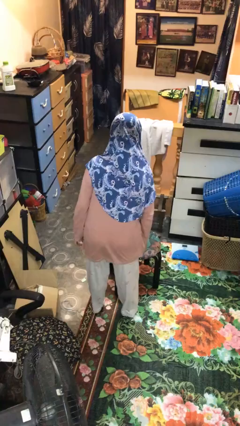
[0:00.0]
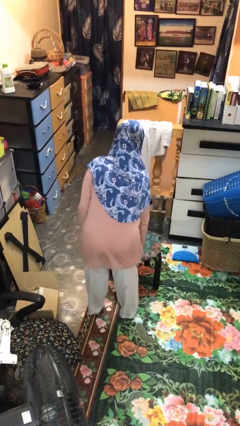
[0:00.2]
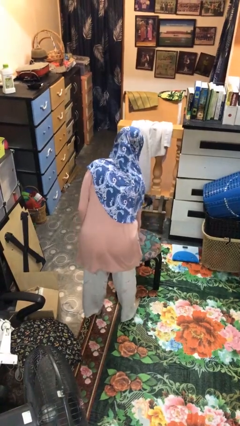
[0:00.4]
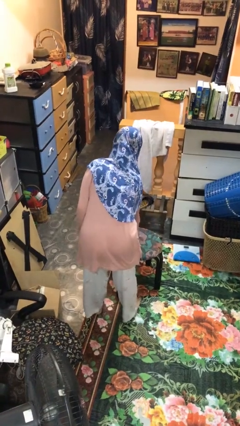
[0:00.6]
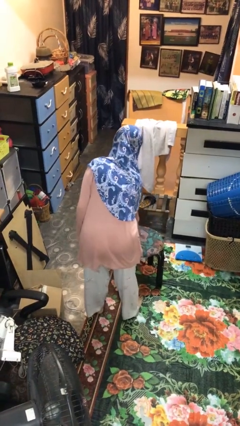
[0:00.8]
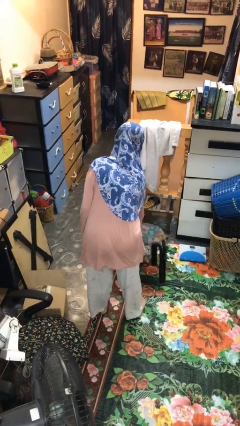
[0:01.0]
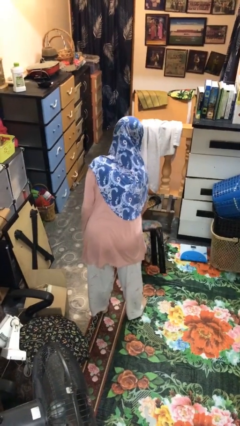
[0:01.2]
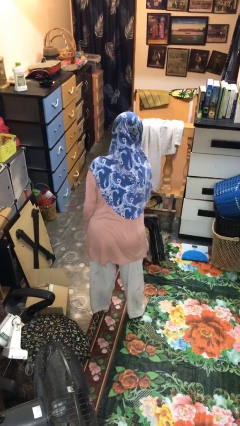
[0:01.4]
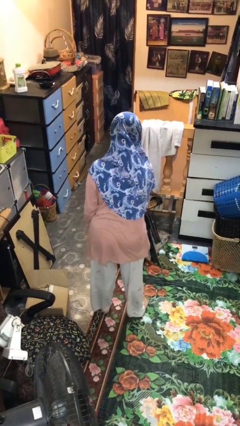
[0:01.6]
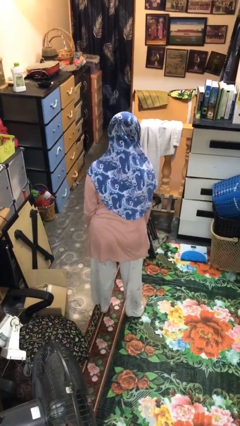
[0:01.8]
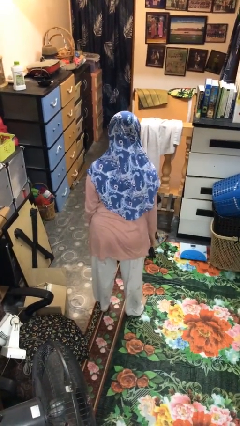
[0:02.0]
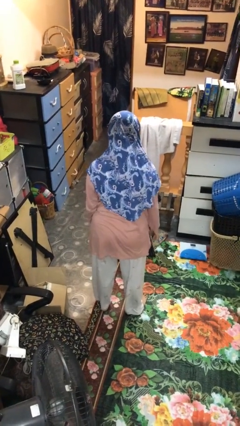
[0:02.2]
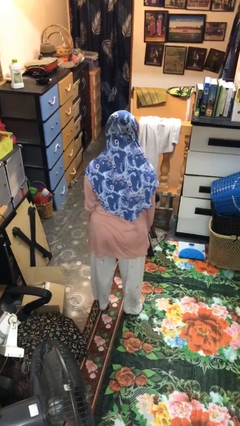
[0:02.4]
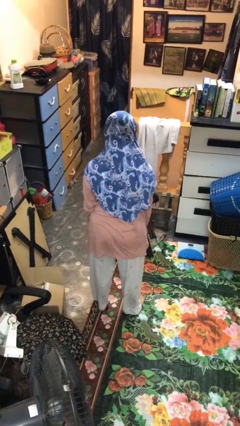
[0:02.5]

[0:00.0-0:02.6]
person knocks over furniture

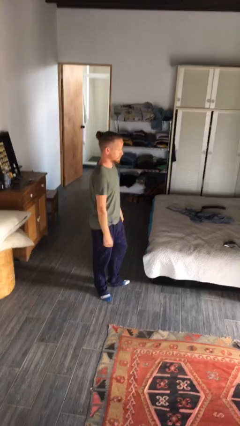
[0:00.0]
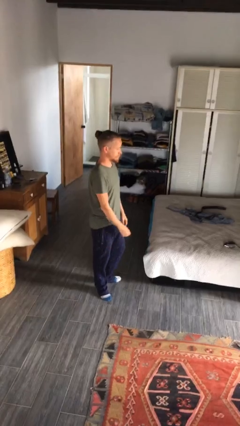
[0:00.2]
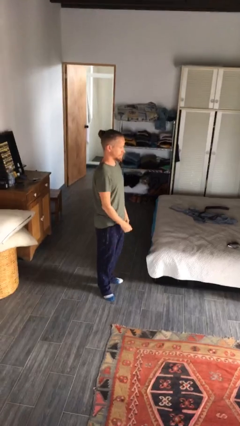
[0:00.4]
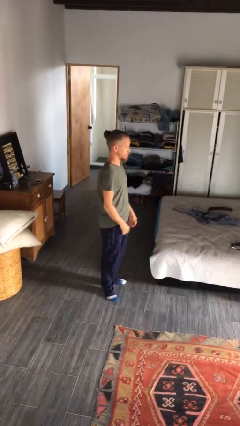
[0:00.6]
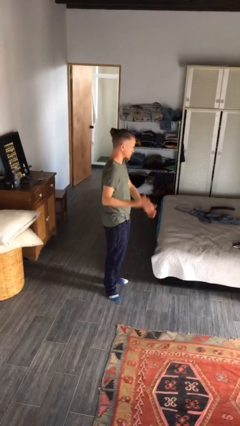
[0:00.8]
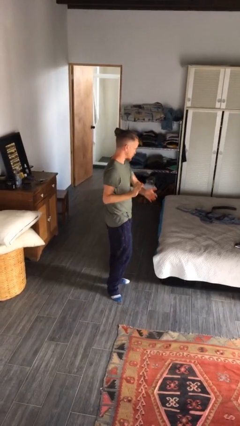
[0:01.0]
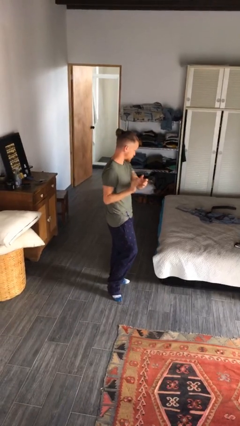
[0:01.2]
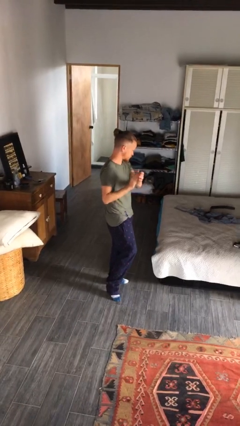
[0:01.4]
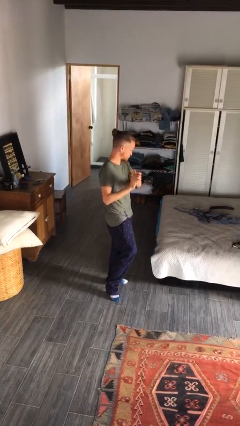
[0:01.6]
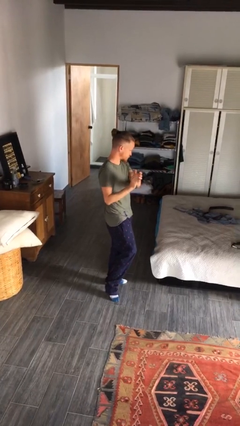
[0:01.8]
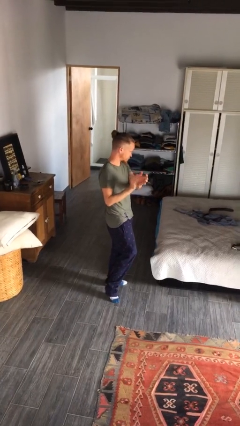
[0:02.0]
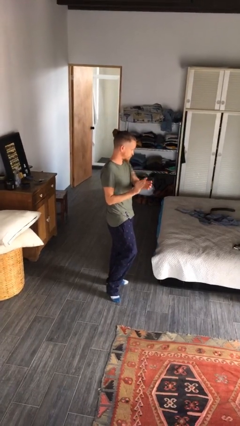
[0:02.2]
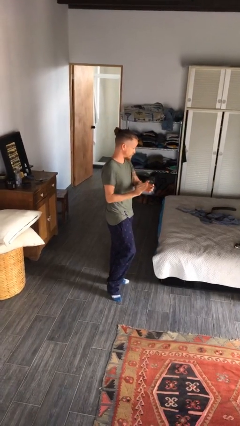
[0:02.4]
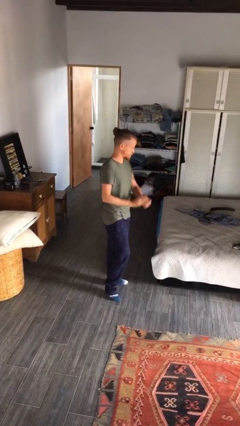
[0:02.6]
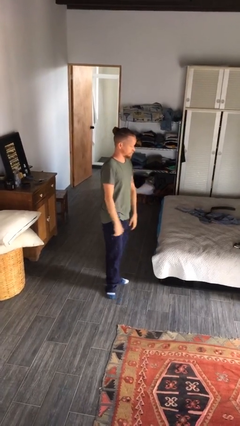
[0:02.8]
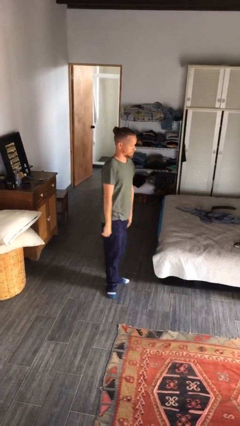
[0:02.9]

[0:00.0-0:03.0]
person claps hands

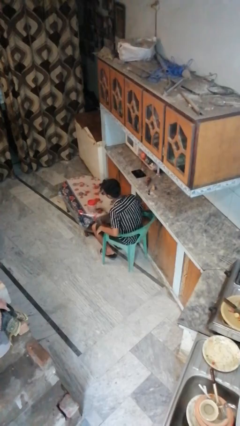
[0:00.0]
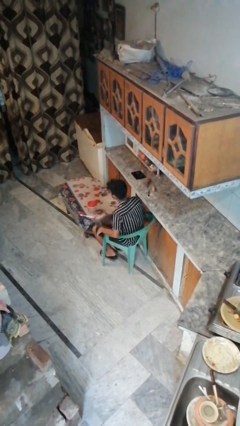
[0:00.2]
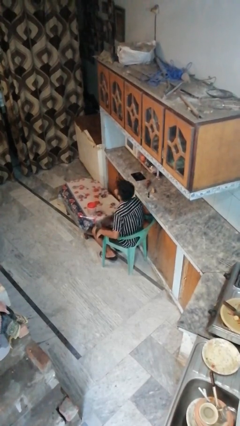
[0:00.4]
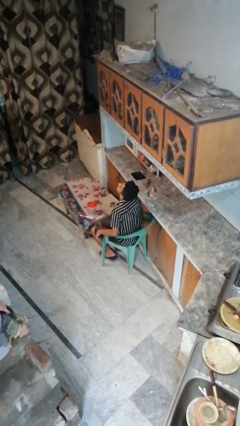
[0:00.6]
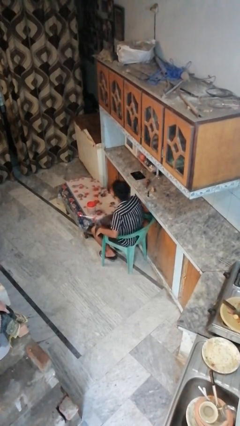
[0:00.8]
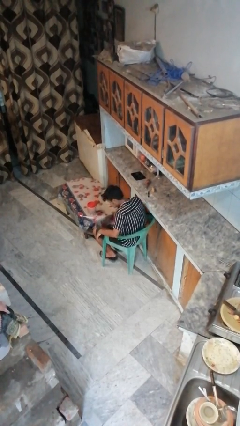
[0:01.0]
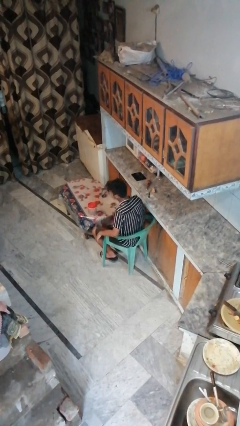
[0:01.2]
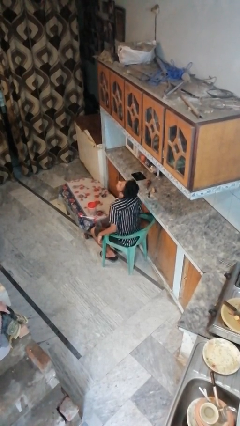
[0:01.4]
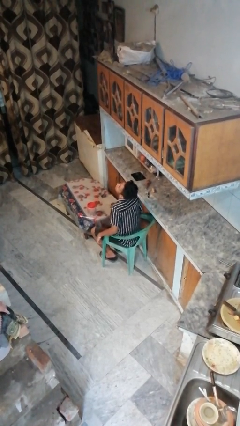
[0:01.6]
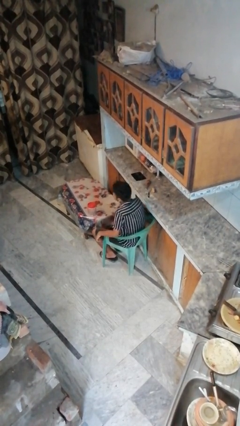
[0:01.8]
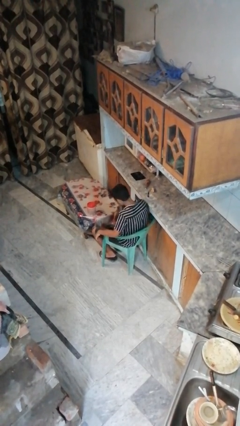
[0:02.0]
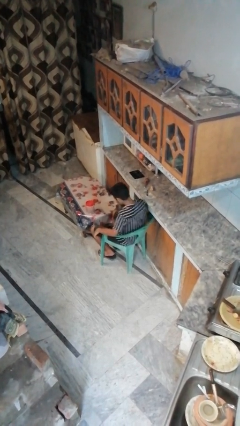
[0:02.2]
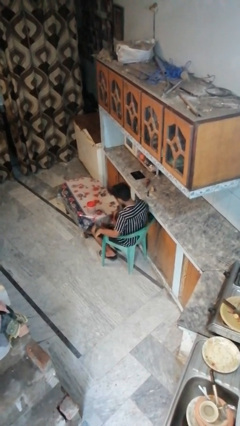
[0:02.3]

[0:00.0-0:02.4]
person nods head

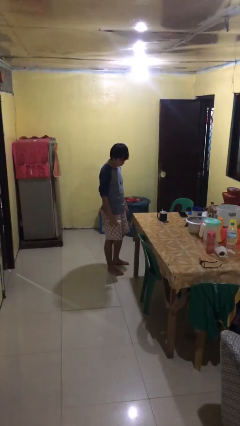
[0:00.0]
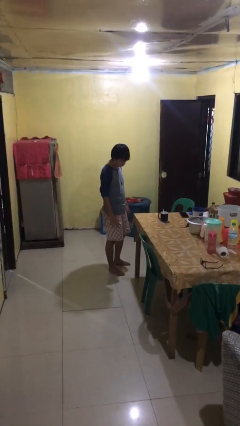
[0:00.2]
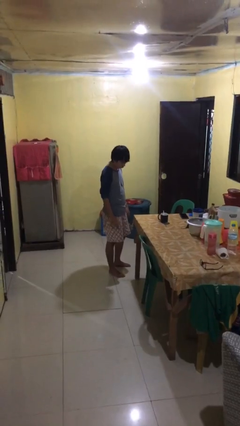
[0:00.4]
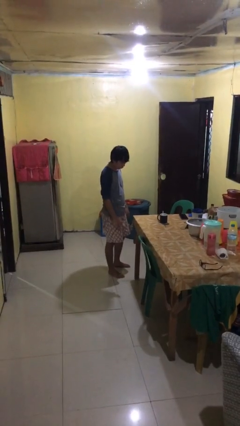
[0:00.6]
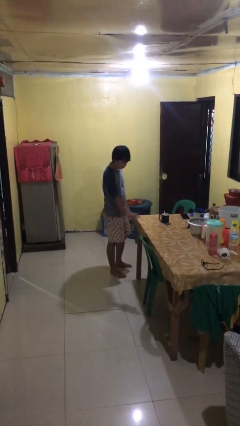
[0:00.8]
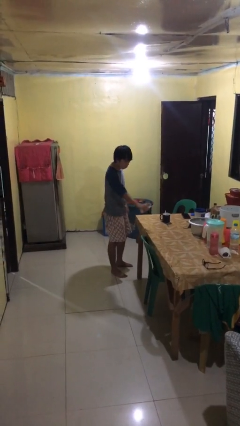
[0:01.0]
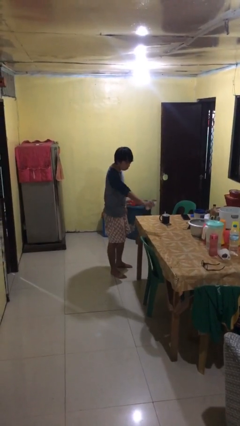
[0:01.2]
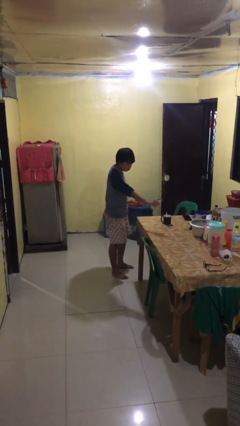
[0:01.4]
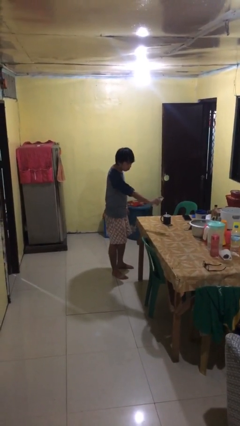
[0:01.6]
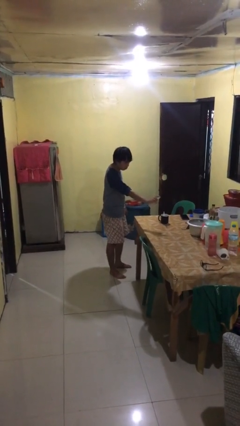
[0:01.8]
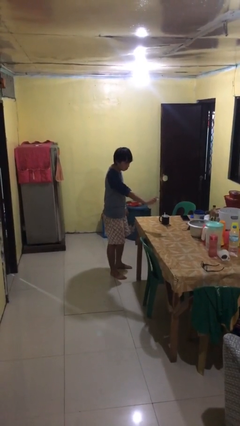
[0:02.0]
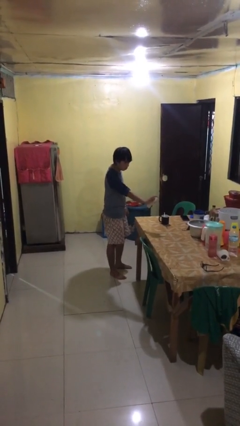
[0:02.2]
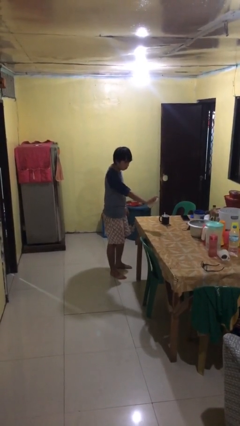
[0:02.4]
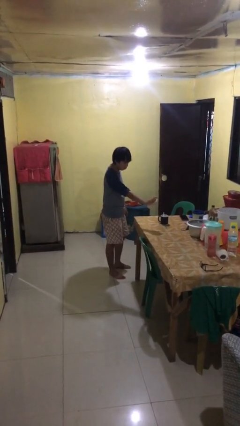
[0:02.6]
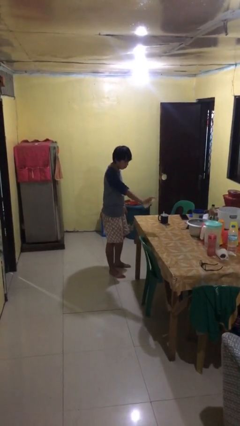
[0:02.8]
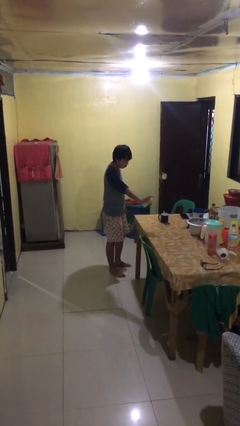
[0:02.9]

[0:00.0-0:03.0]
person sprays from bottle

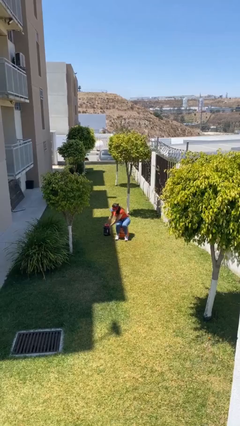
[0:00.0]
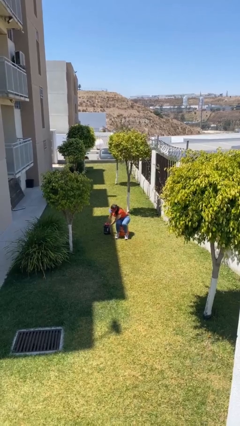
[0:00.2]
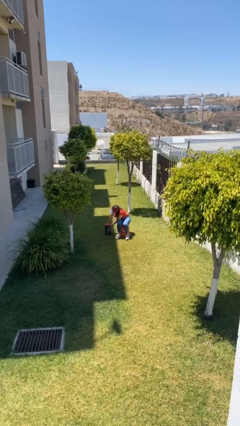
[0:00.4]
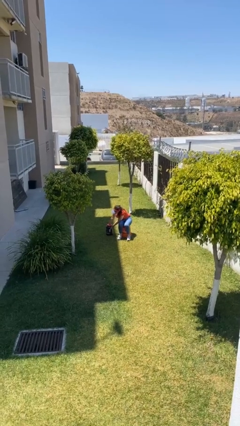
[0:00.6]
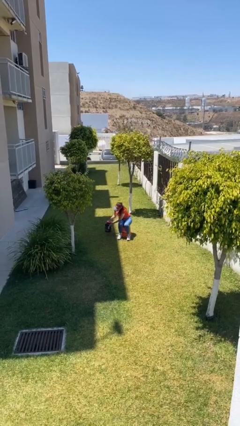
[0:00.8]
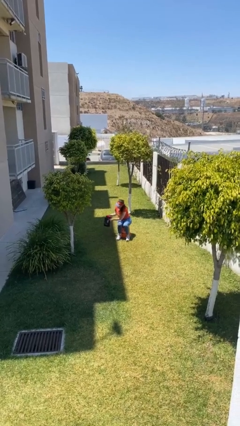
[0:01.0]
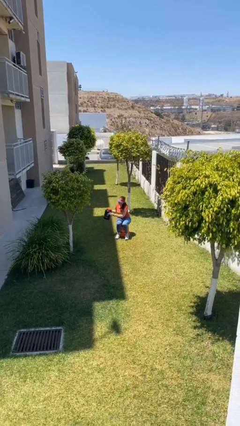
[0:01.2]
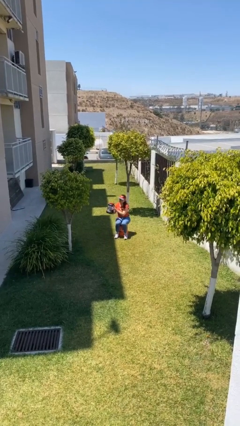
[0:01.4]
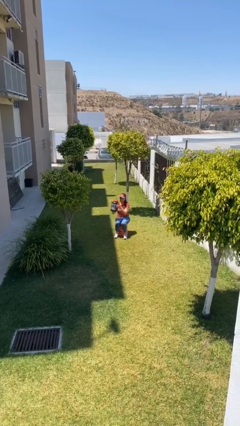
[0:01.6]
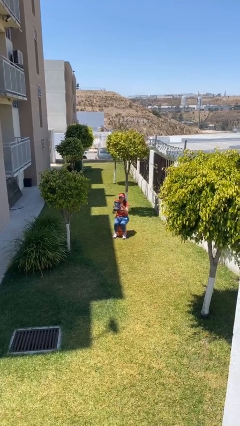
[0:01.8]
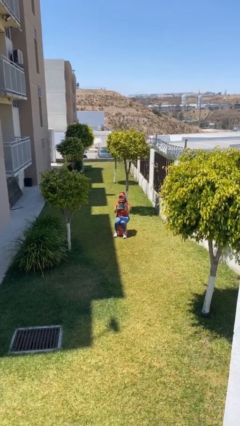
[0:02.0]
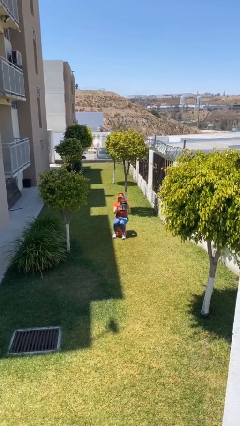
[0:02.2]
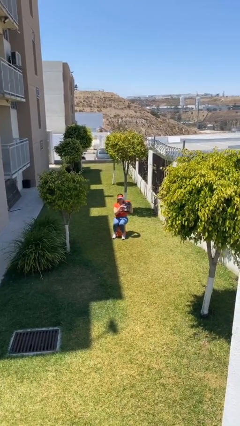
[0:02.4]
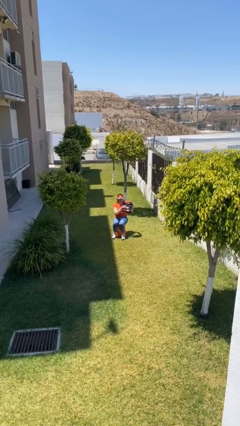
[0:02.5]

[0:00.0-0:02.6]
person picks up object from floor

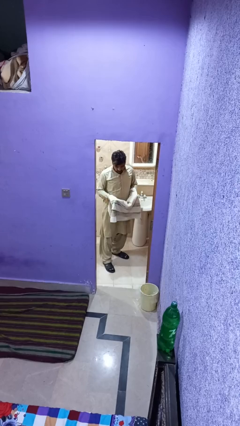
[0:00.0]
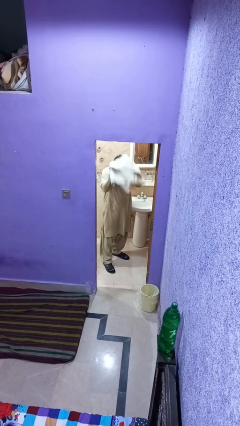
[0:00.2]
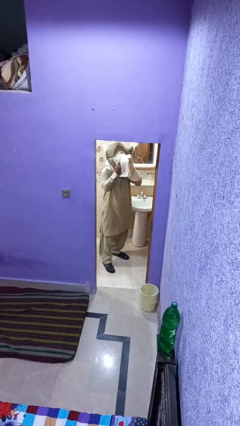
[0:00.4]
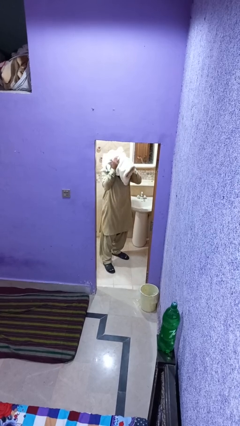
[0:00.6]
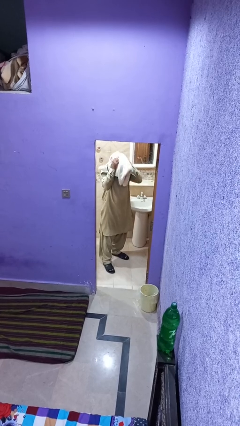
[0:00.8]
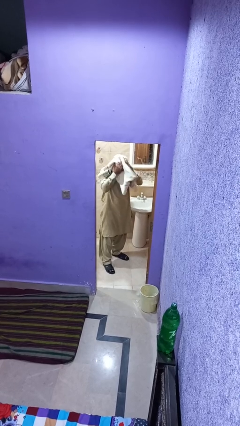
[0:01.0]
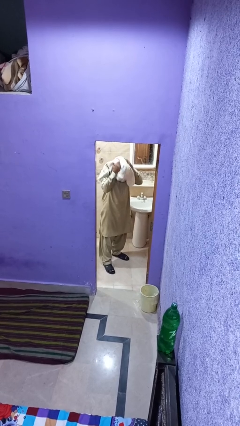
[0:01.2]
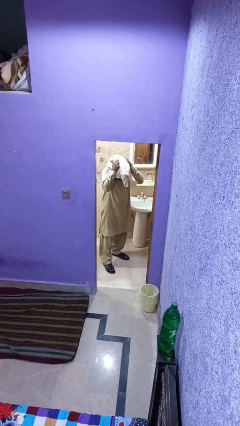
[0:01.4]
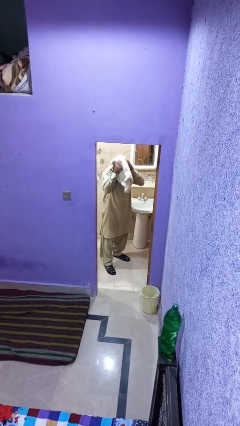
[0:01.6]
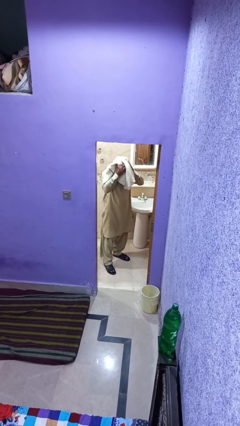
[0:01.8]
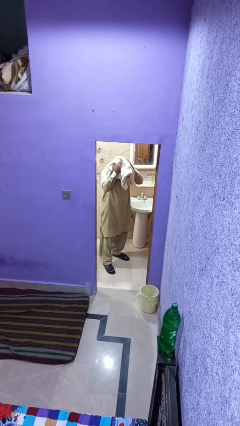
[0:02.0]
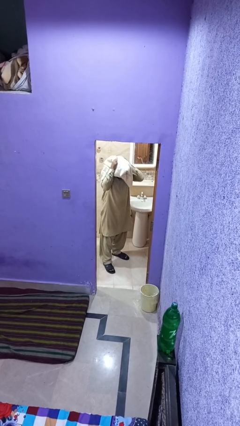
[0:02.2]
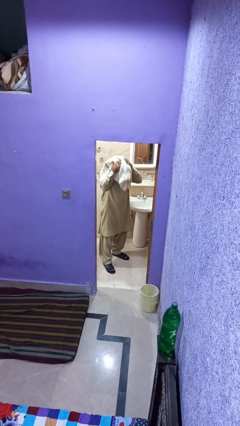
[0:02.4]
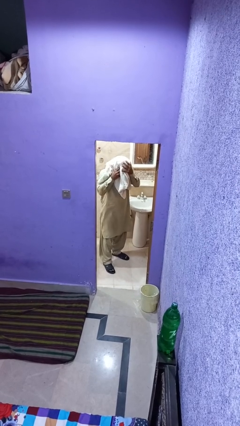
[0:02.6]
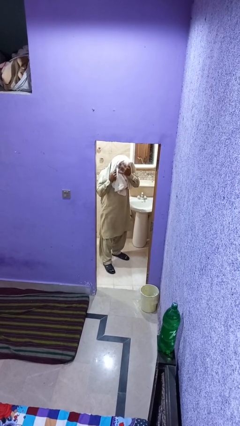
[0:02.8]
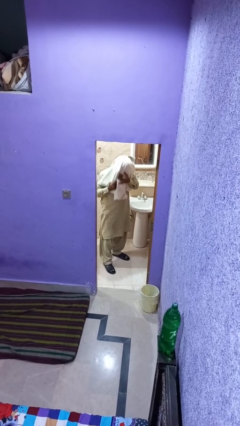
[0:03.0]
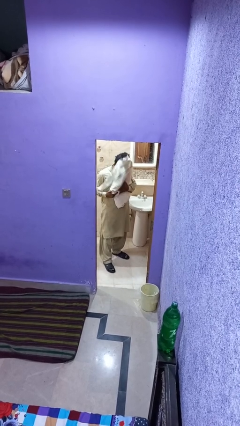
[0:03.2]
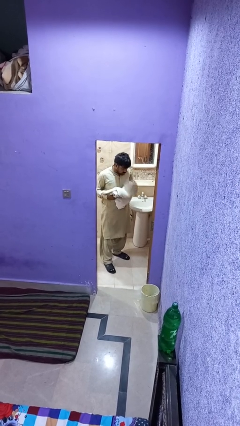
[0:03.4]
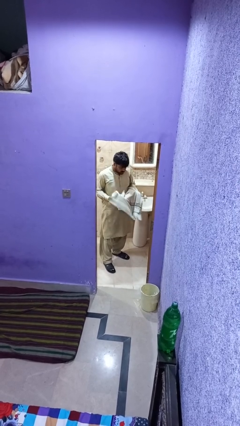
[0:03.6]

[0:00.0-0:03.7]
person dries hair with towel

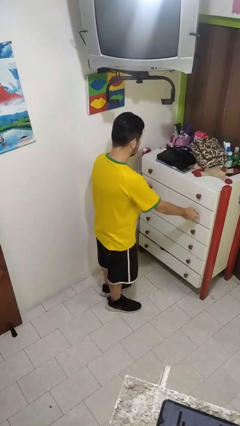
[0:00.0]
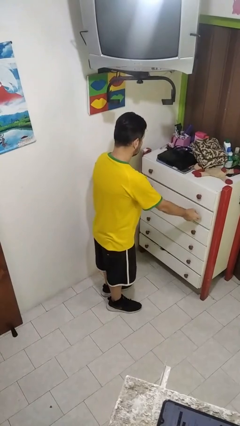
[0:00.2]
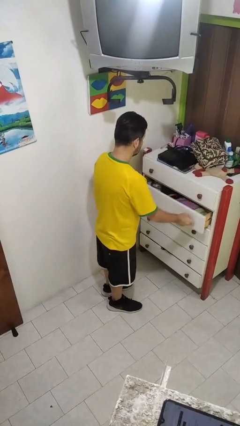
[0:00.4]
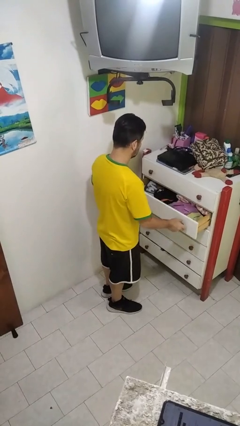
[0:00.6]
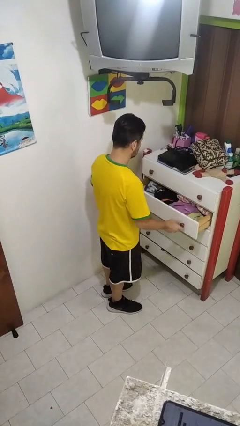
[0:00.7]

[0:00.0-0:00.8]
person opens dresser drawer
